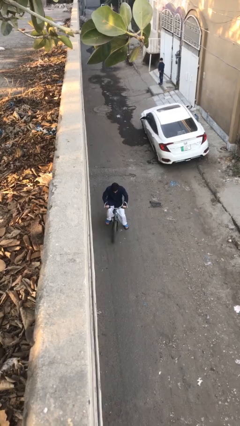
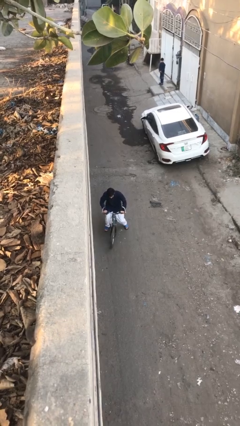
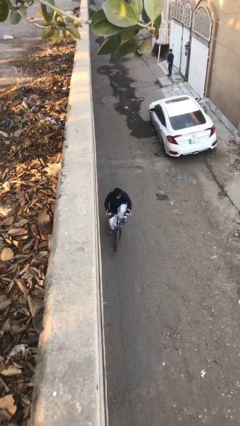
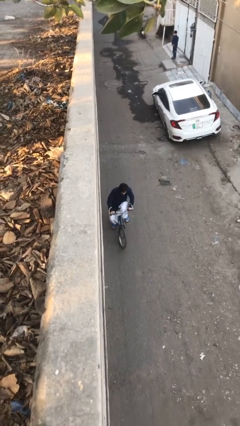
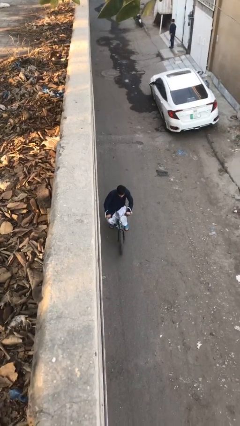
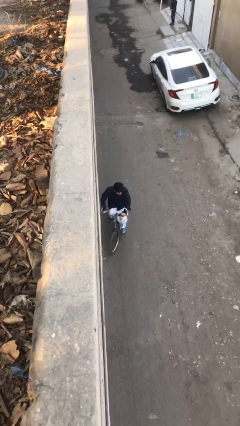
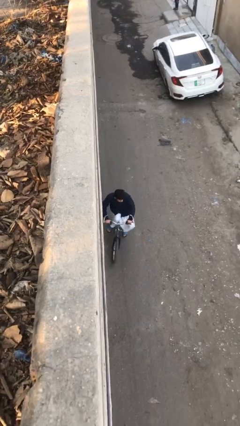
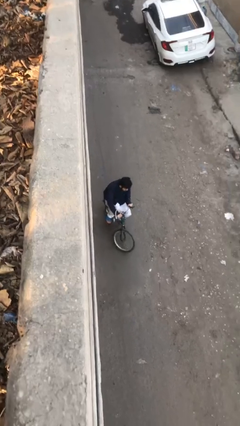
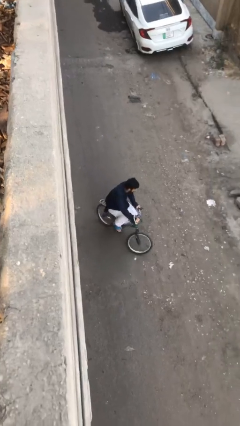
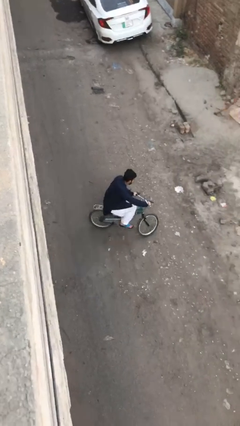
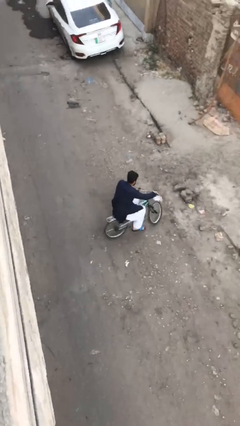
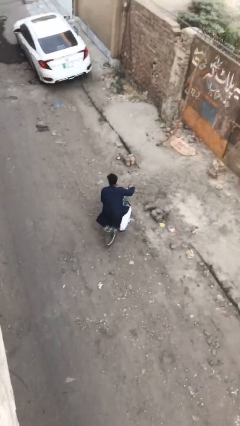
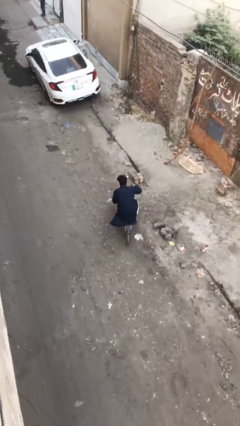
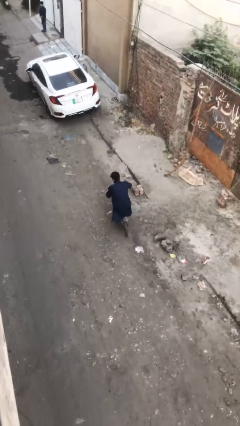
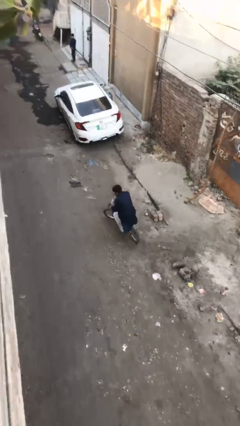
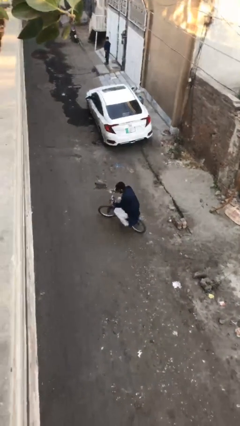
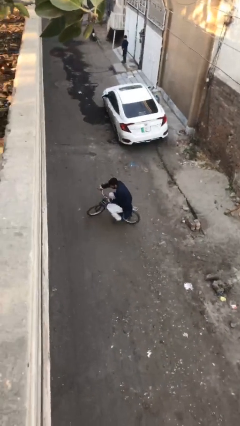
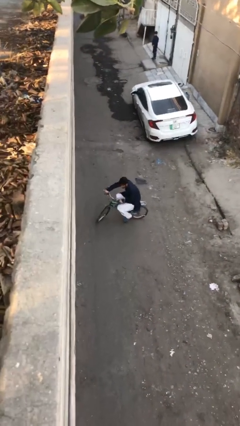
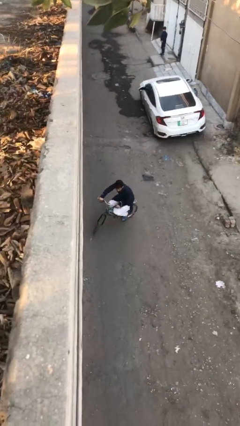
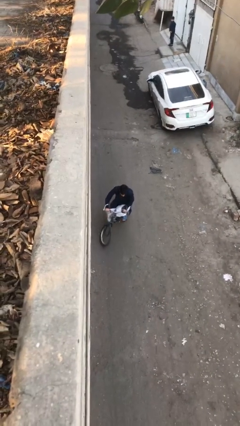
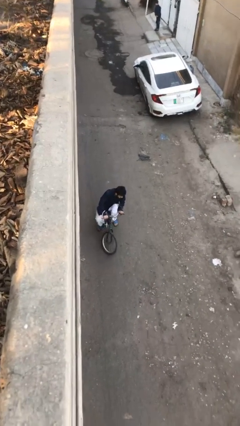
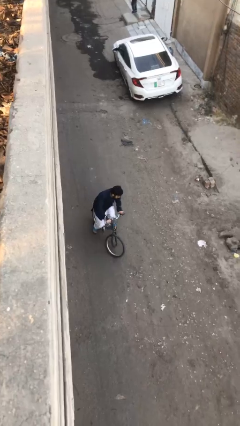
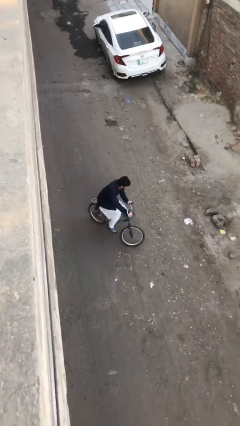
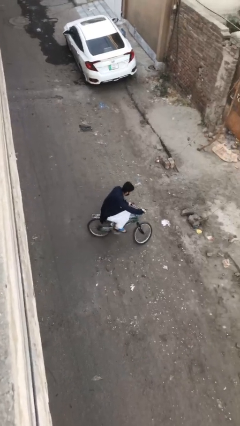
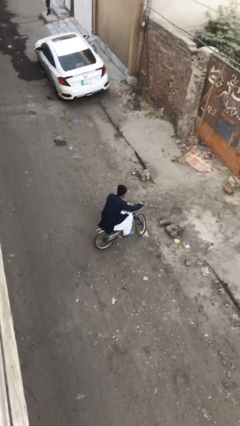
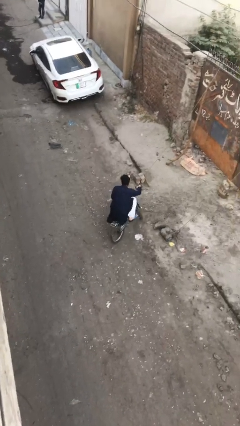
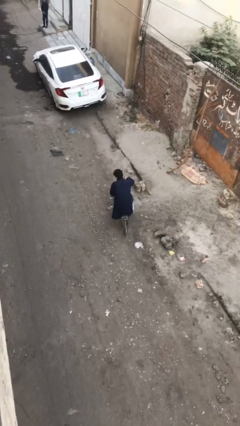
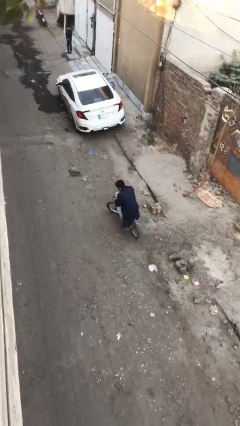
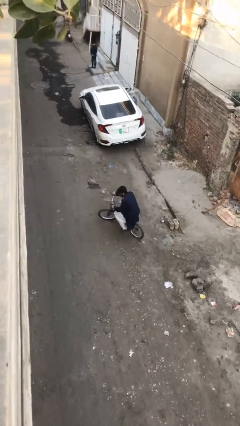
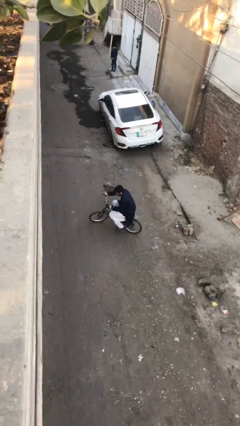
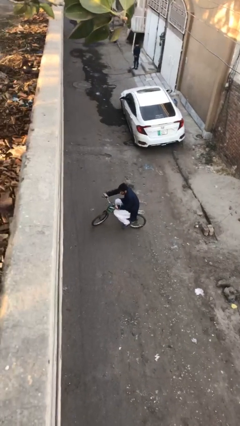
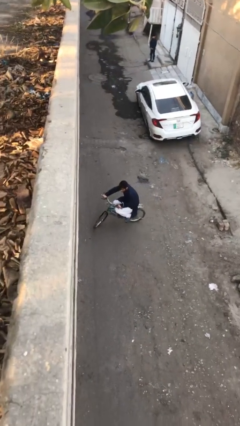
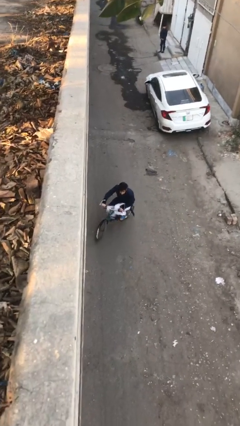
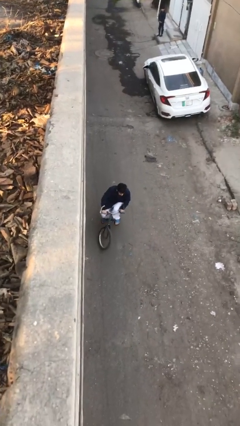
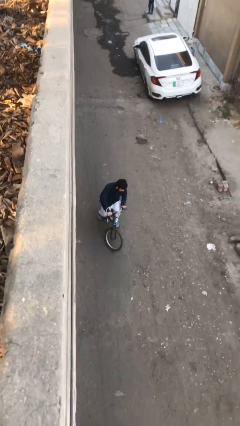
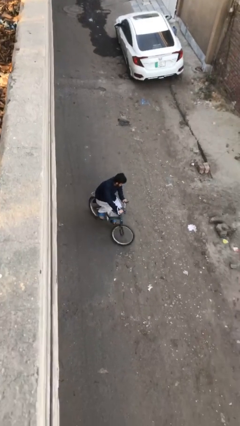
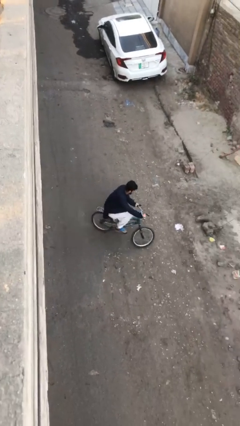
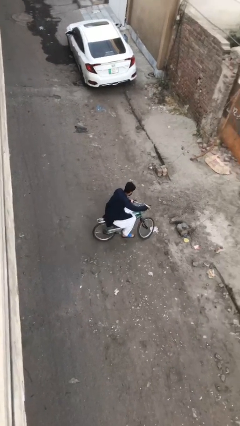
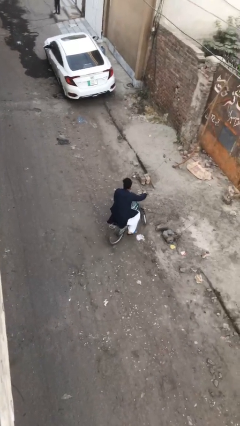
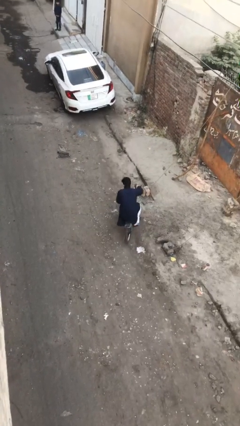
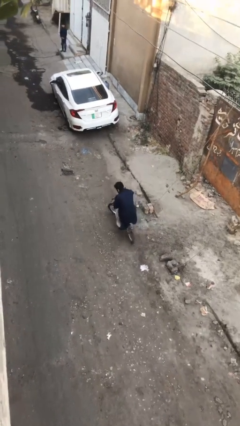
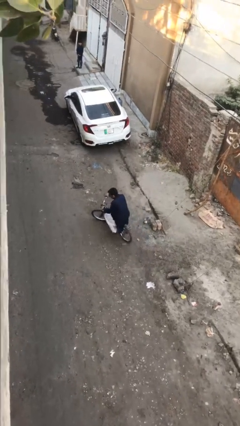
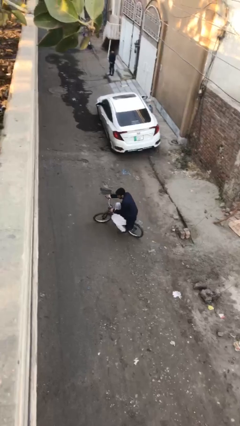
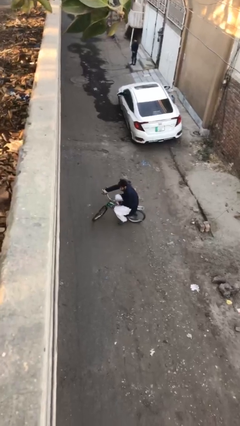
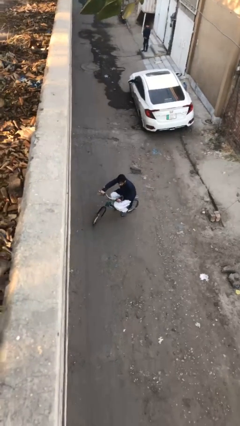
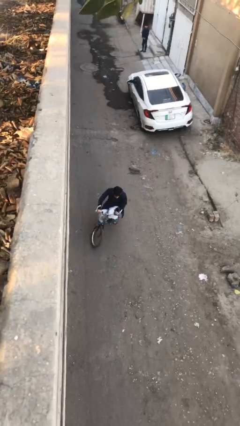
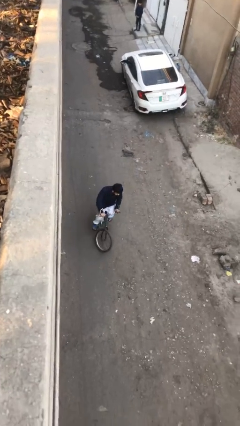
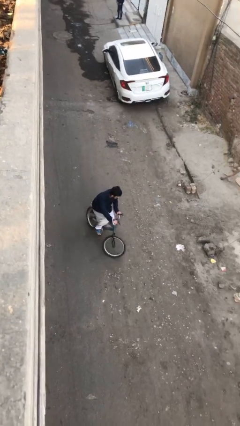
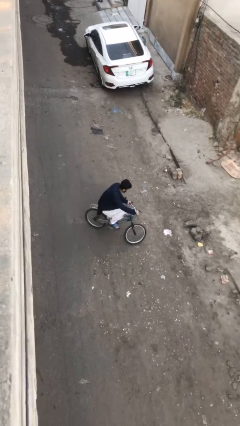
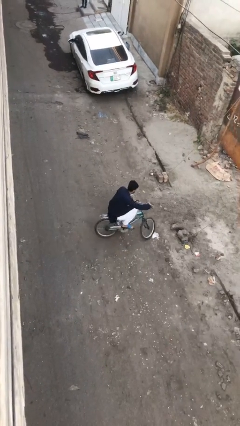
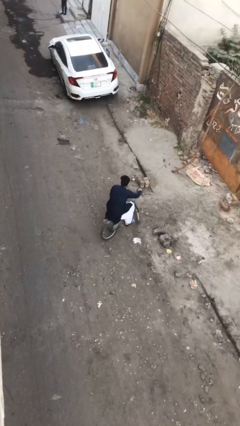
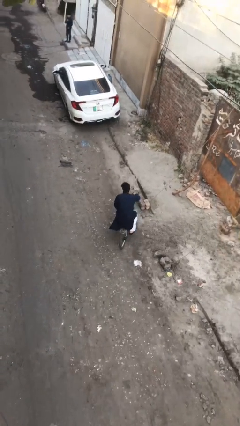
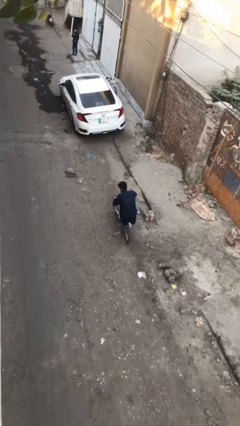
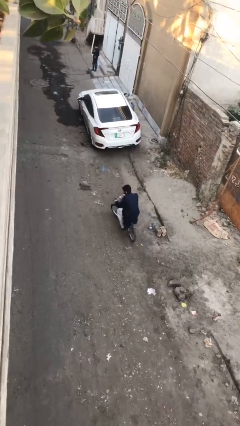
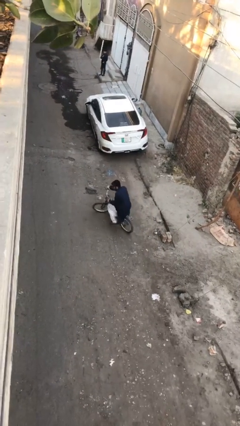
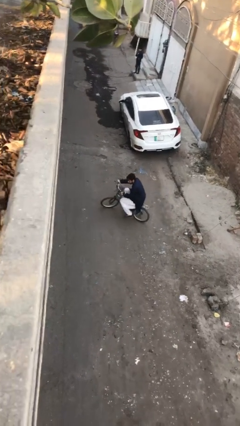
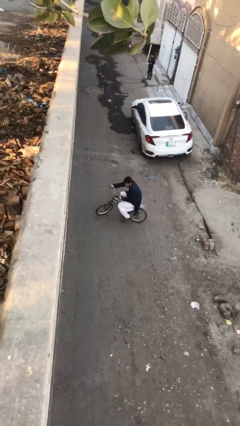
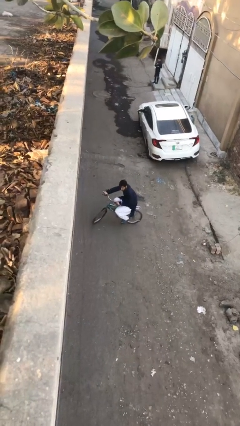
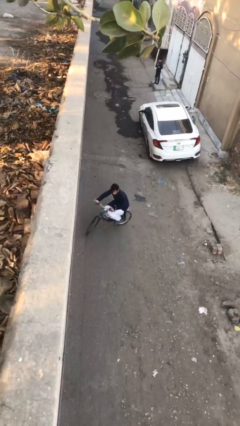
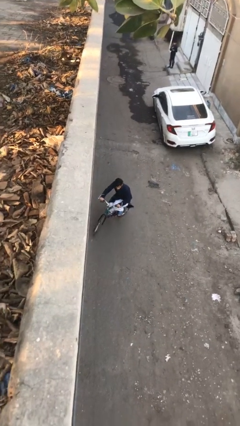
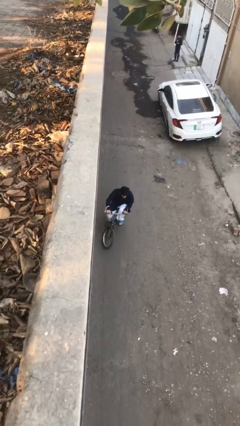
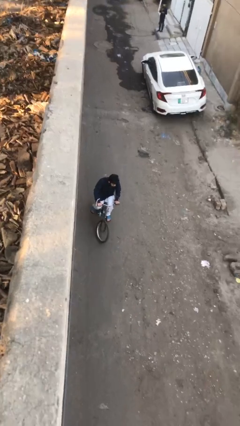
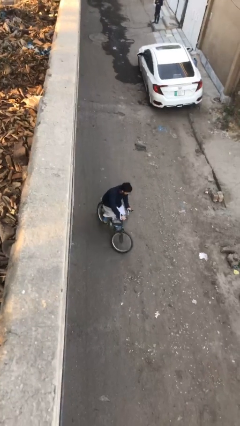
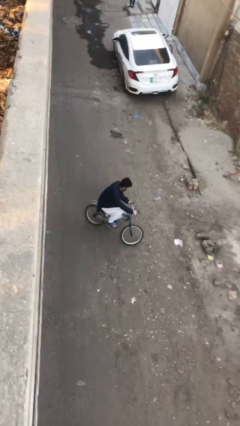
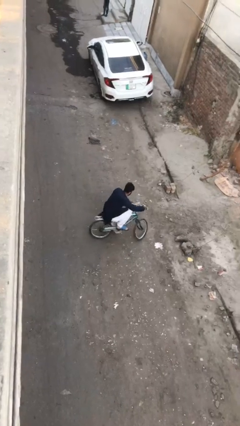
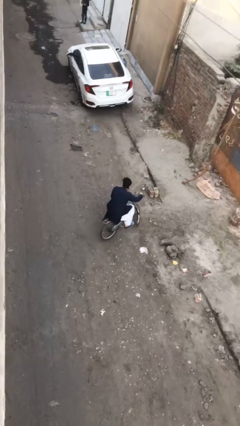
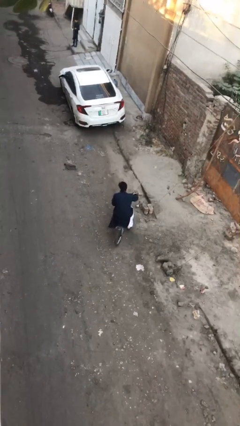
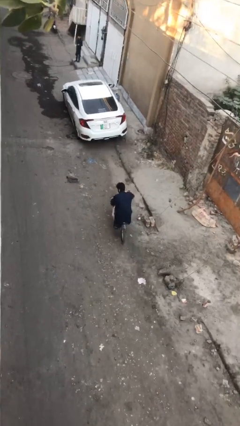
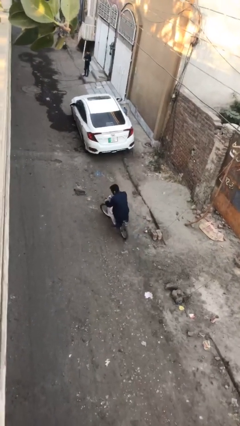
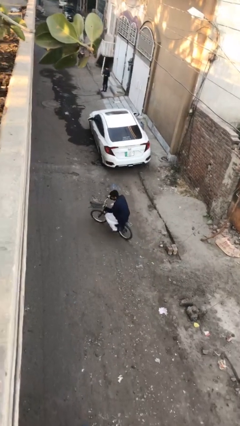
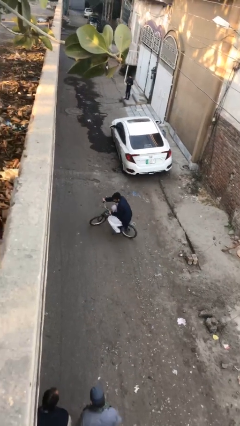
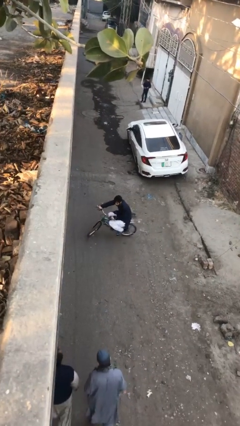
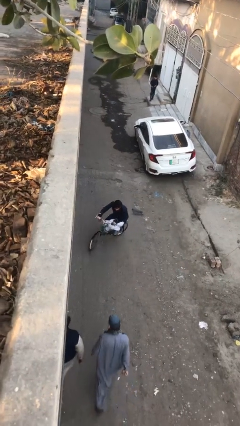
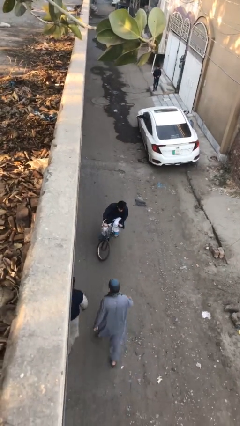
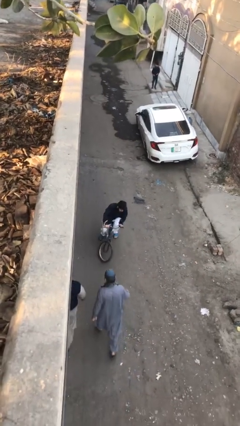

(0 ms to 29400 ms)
person rides bicycle

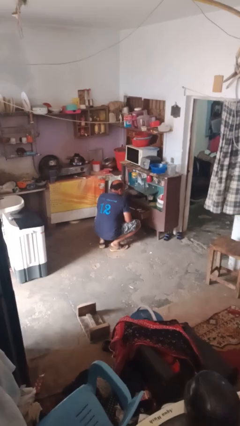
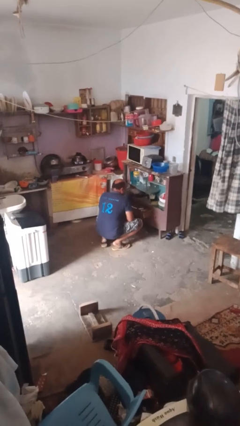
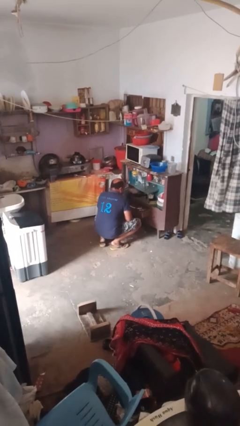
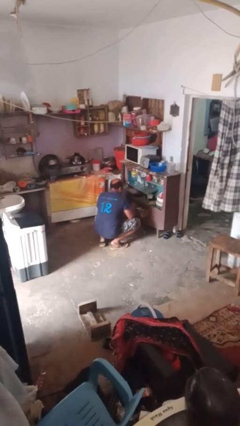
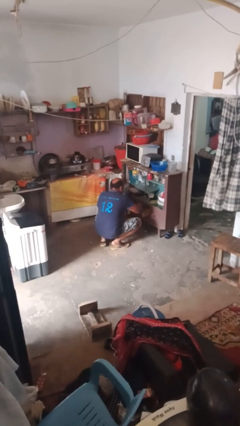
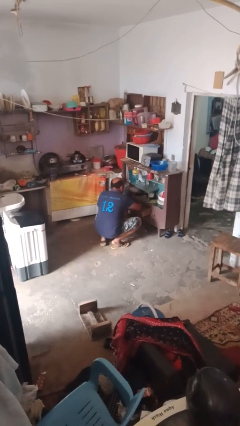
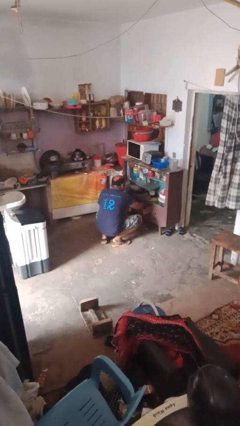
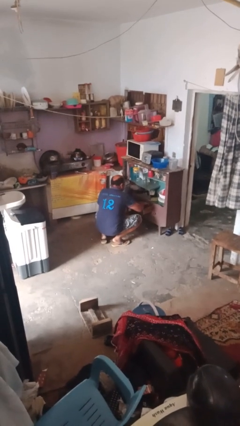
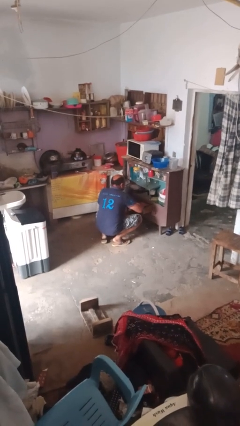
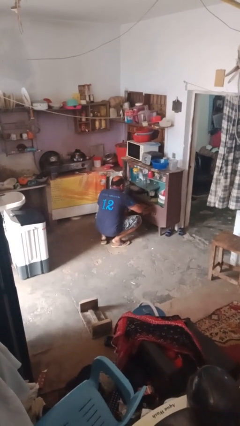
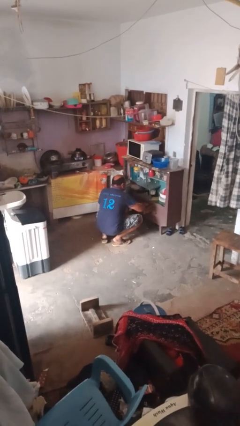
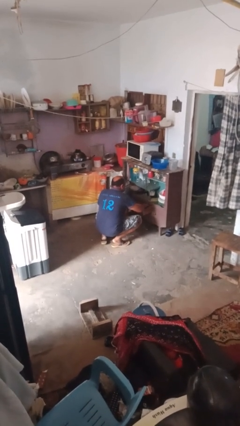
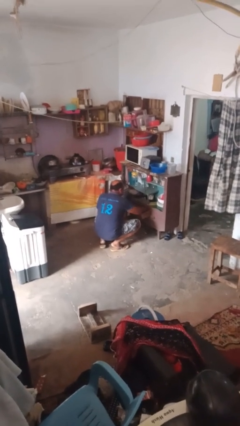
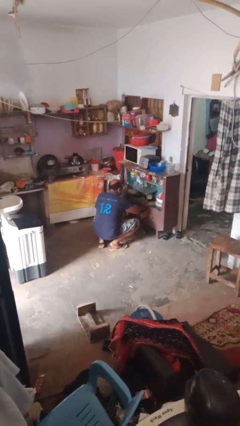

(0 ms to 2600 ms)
person searches in kitchen drawer

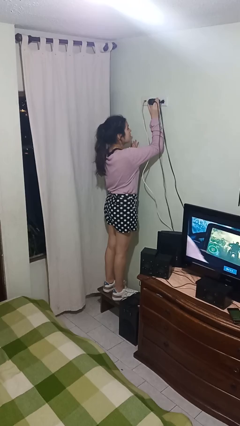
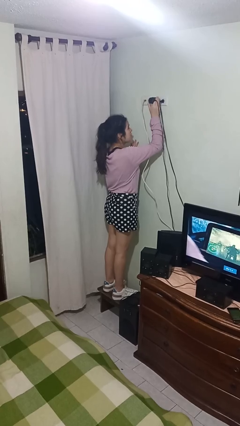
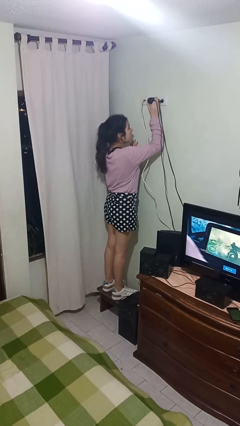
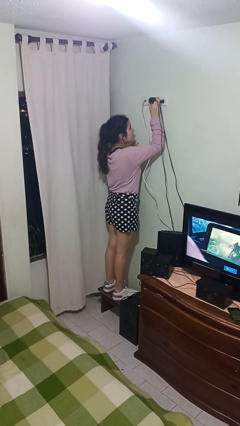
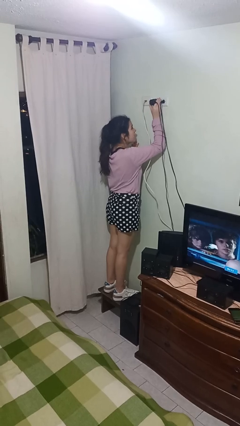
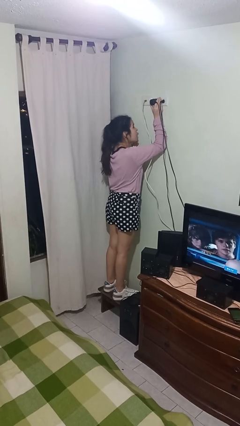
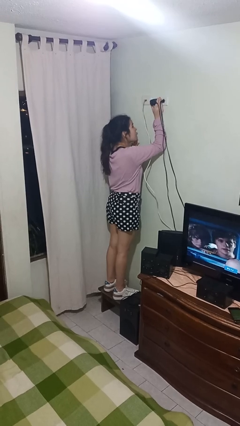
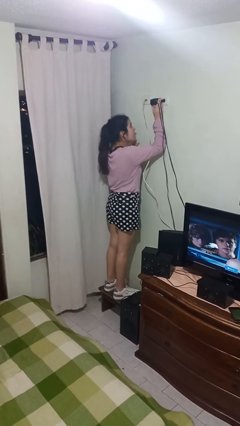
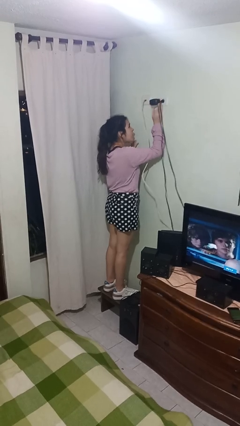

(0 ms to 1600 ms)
person plugs into electrical socket
